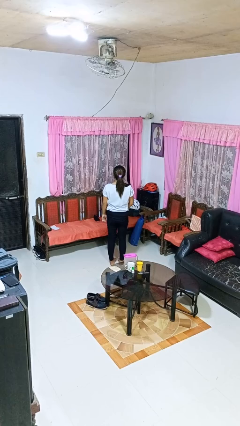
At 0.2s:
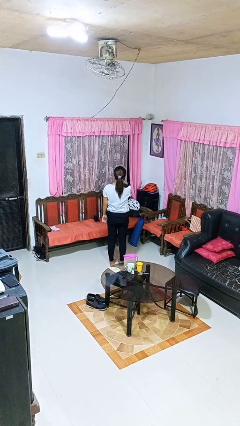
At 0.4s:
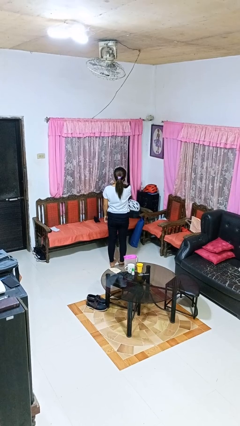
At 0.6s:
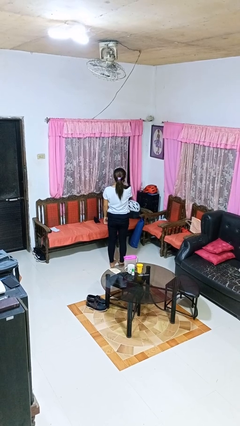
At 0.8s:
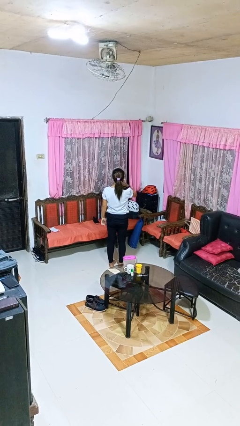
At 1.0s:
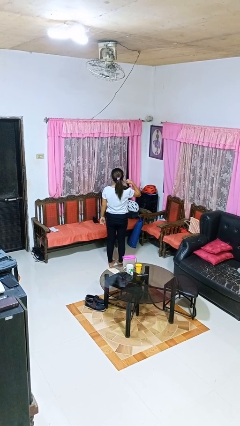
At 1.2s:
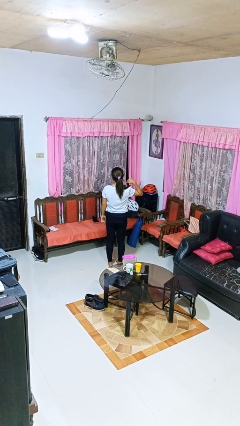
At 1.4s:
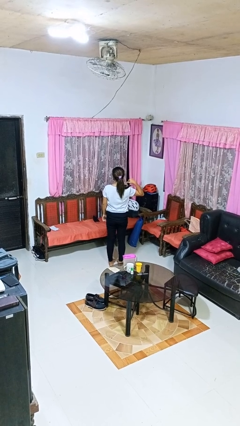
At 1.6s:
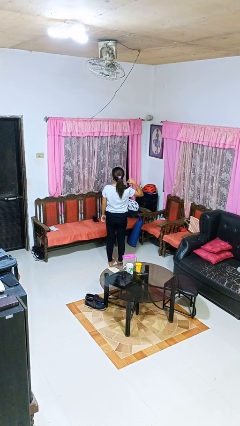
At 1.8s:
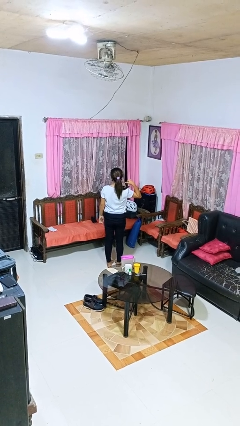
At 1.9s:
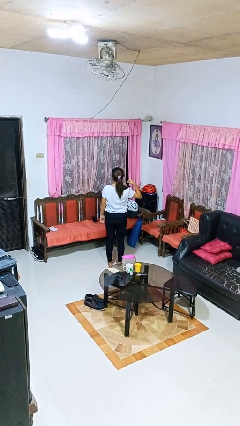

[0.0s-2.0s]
person gestures cut

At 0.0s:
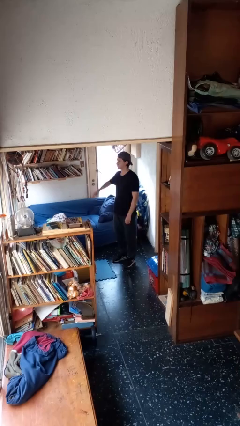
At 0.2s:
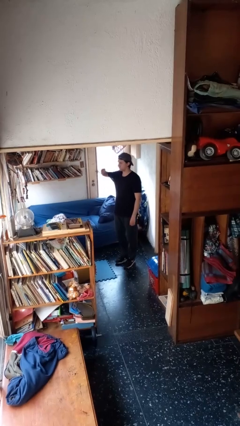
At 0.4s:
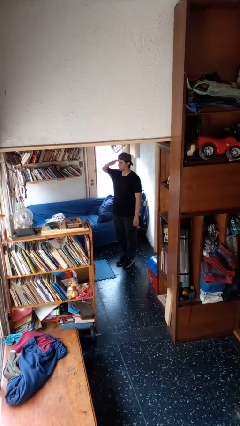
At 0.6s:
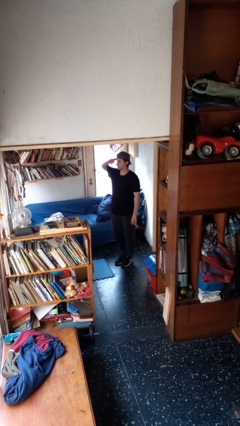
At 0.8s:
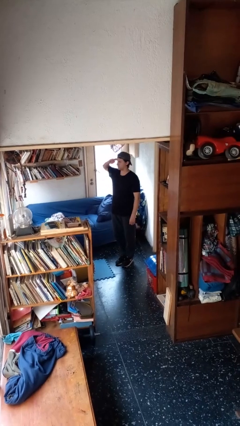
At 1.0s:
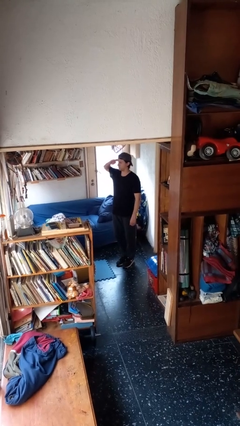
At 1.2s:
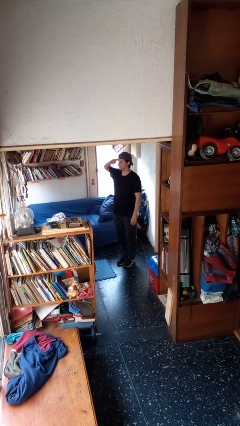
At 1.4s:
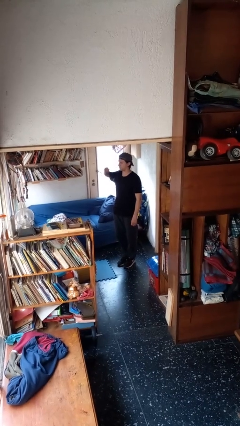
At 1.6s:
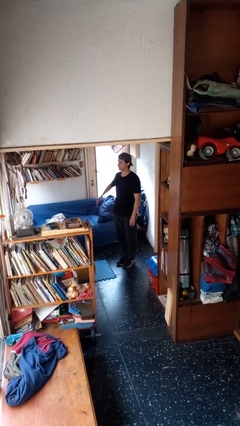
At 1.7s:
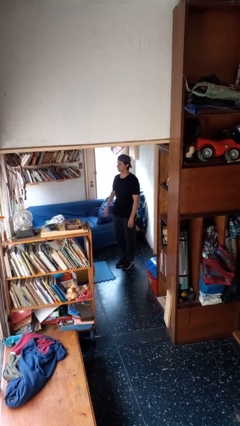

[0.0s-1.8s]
person salutes

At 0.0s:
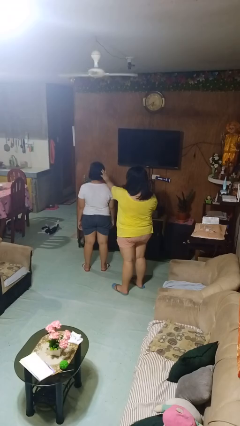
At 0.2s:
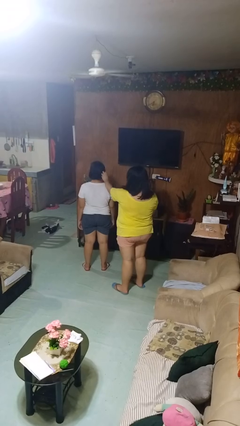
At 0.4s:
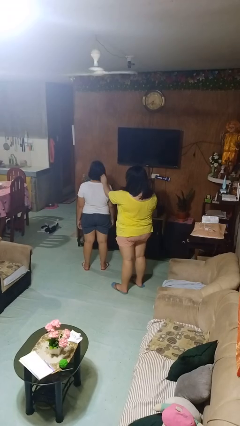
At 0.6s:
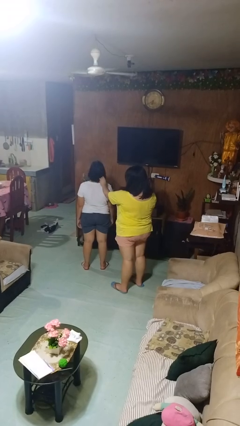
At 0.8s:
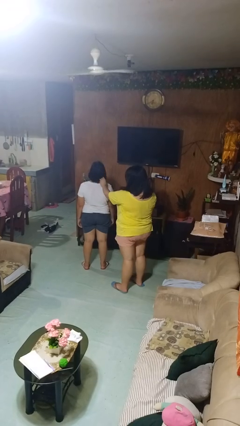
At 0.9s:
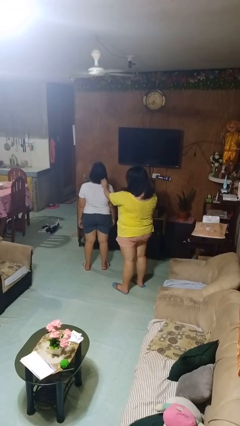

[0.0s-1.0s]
person grabs person by hair

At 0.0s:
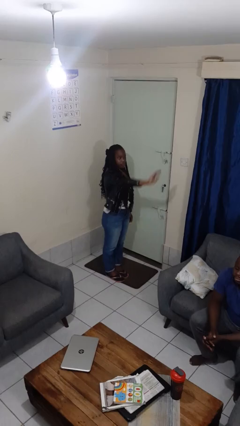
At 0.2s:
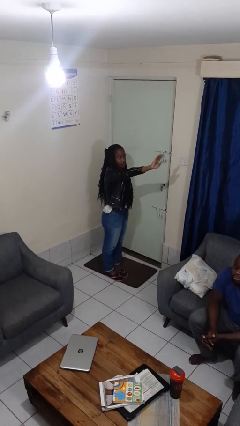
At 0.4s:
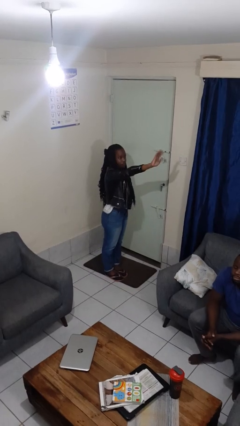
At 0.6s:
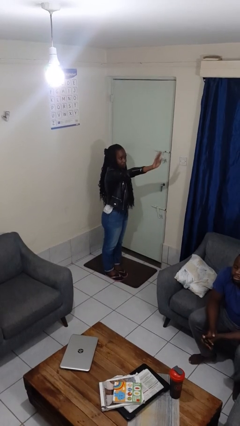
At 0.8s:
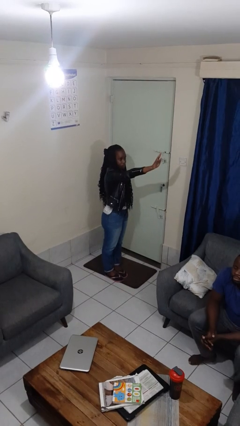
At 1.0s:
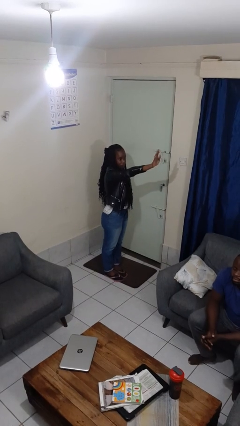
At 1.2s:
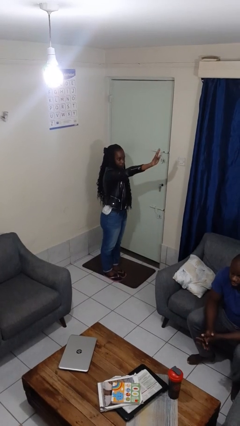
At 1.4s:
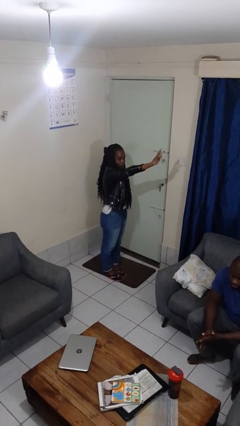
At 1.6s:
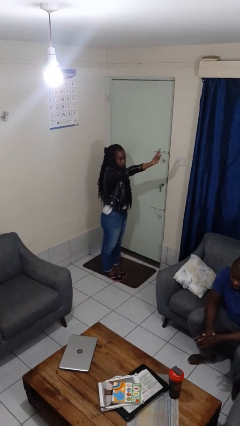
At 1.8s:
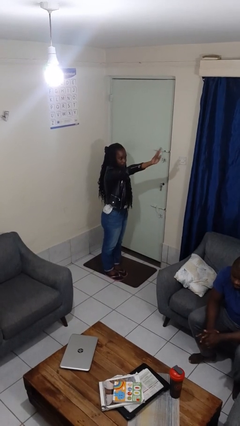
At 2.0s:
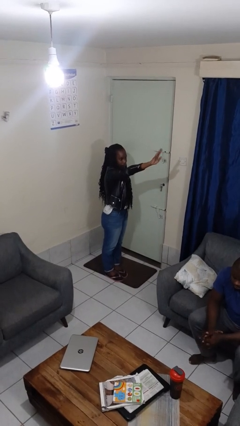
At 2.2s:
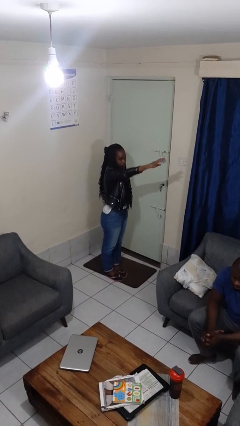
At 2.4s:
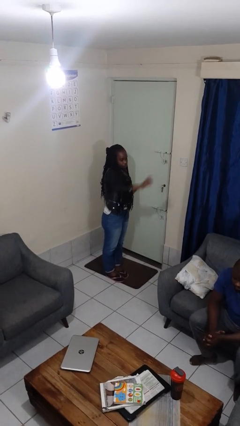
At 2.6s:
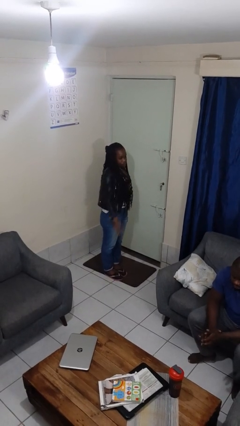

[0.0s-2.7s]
person waves at person

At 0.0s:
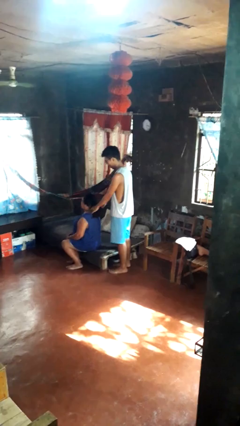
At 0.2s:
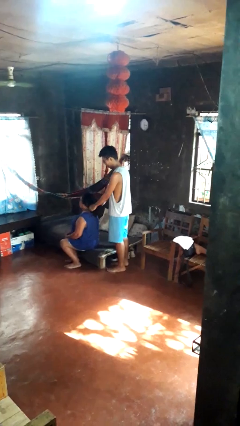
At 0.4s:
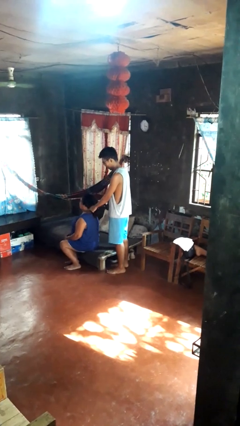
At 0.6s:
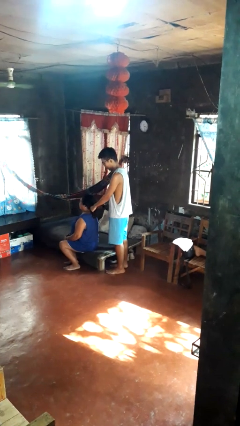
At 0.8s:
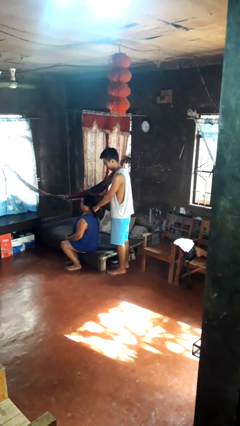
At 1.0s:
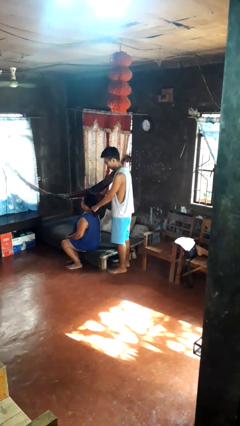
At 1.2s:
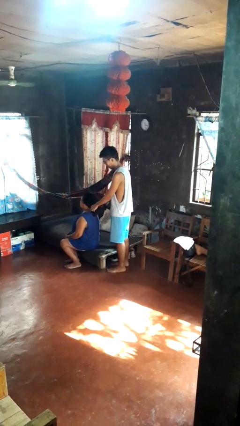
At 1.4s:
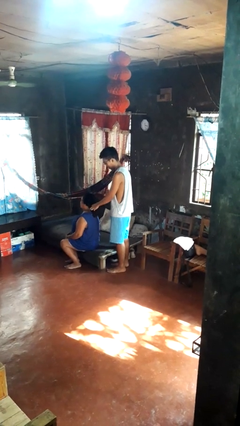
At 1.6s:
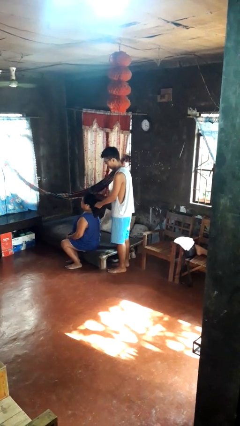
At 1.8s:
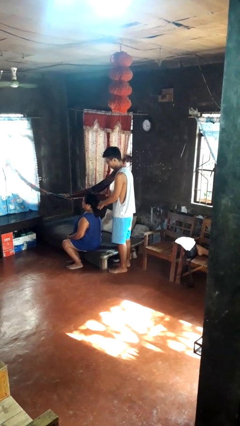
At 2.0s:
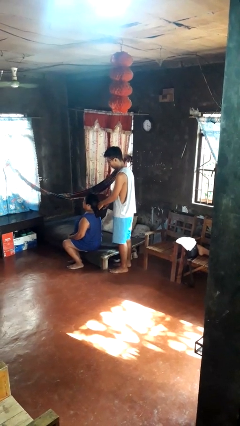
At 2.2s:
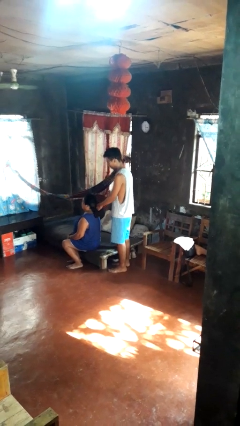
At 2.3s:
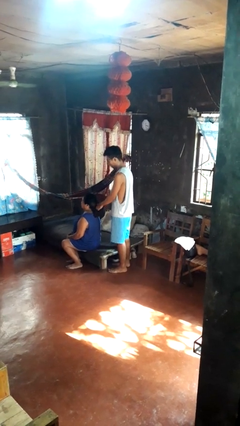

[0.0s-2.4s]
person braids hair of person

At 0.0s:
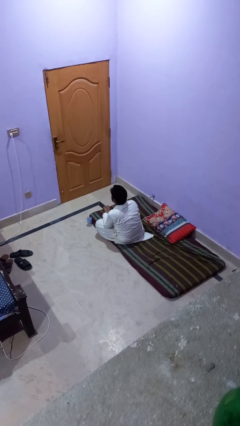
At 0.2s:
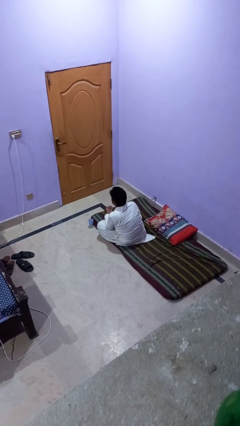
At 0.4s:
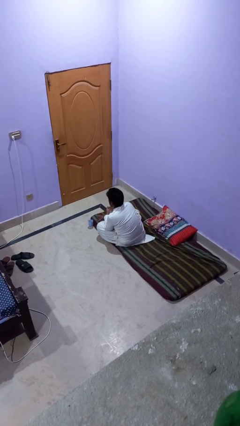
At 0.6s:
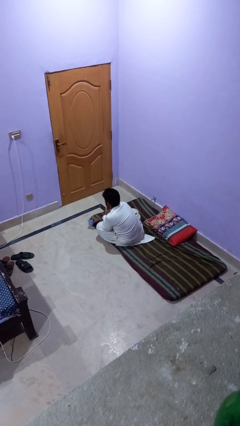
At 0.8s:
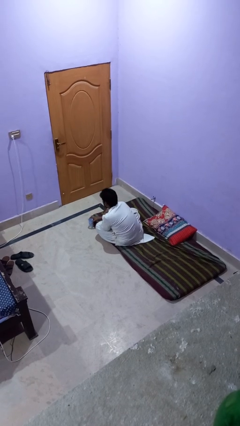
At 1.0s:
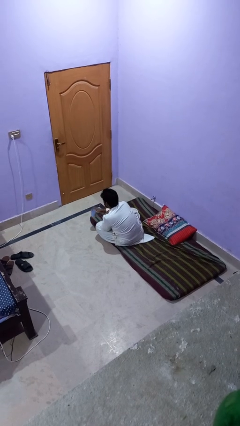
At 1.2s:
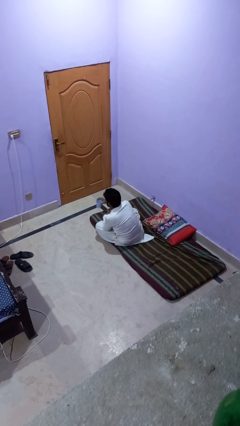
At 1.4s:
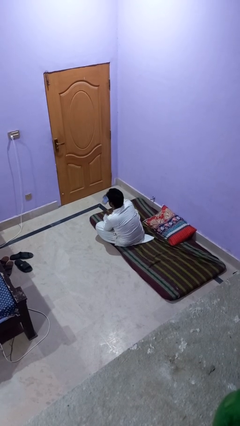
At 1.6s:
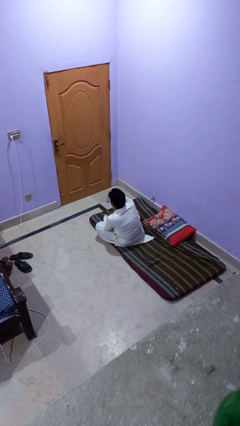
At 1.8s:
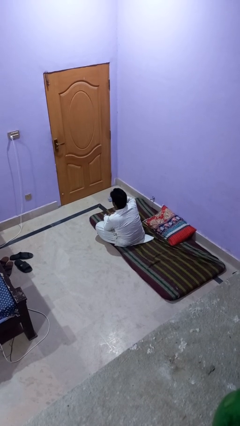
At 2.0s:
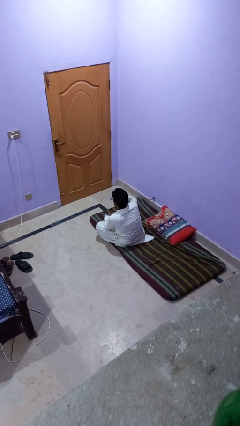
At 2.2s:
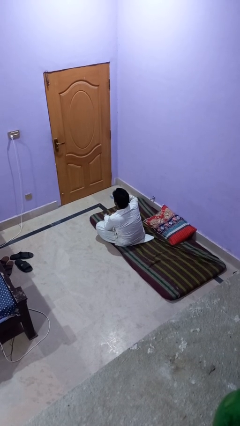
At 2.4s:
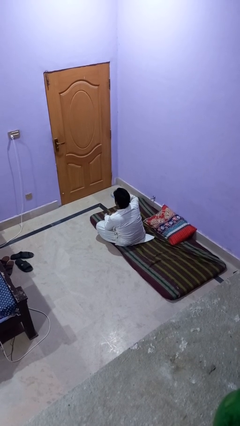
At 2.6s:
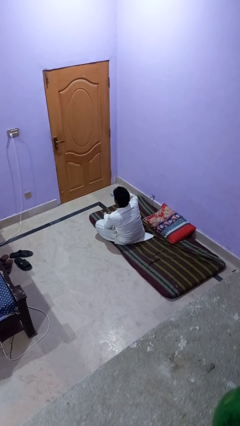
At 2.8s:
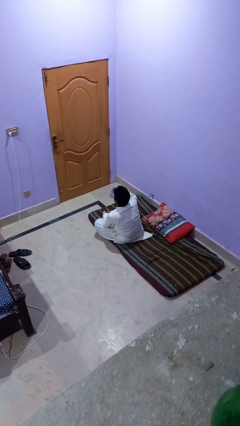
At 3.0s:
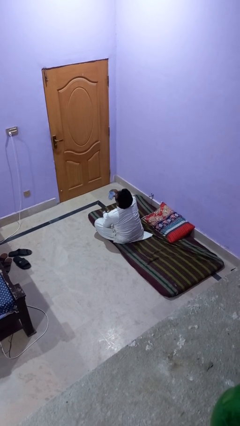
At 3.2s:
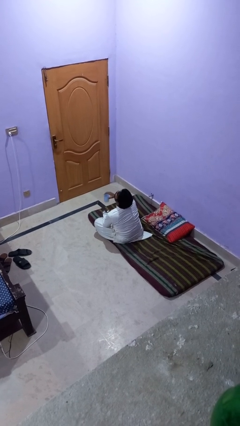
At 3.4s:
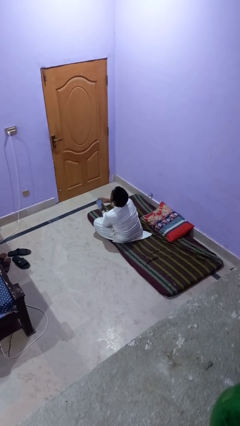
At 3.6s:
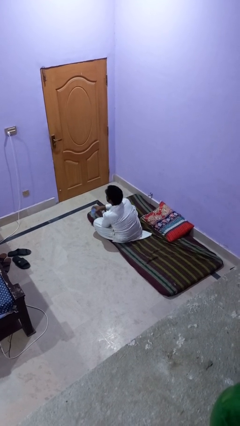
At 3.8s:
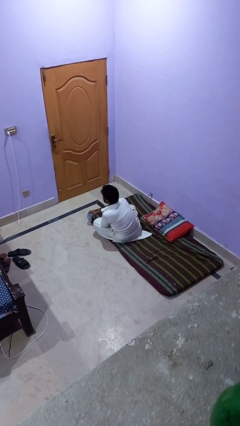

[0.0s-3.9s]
person drinks from cup

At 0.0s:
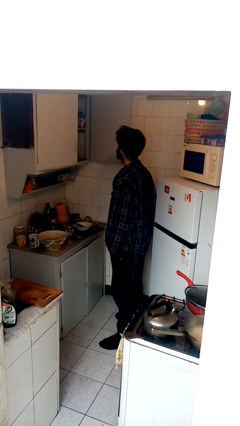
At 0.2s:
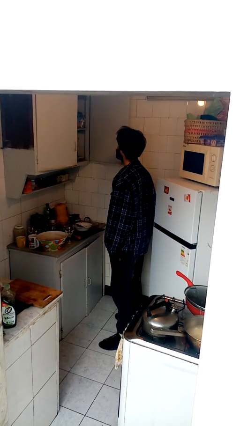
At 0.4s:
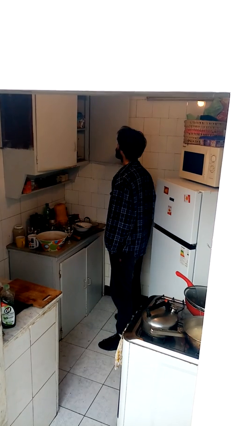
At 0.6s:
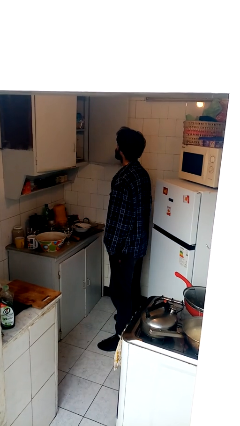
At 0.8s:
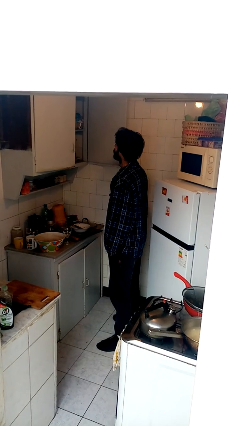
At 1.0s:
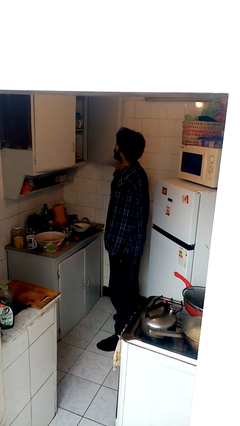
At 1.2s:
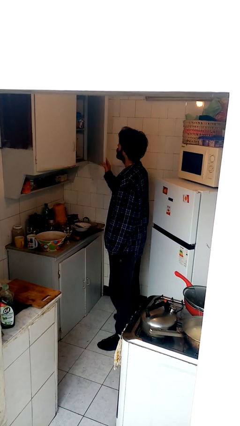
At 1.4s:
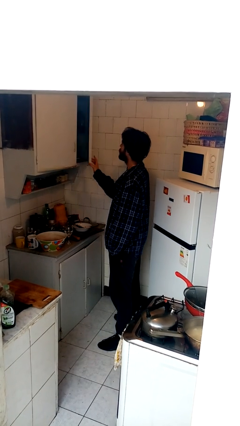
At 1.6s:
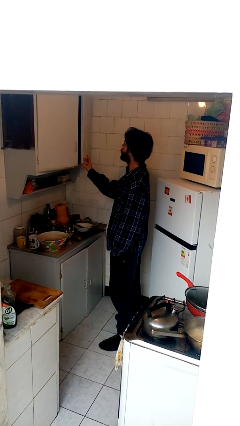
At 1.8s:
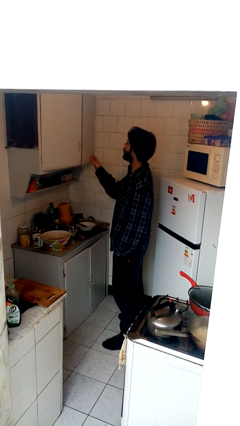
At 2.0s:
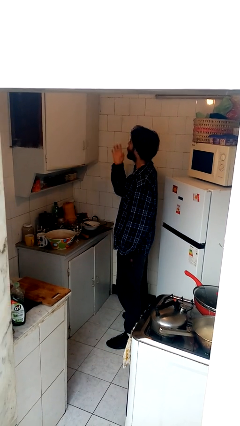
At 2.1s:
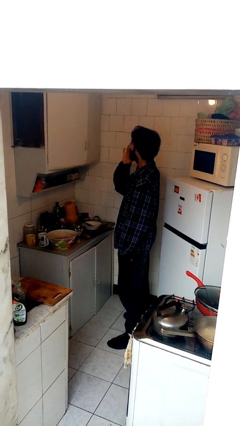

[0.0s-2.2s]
person closes cabinet

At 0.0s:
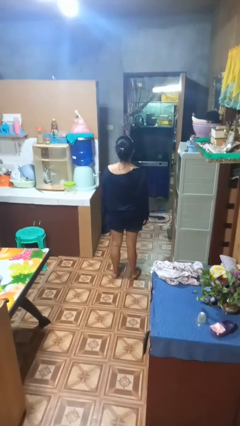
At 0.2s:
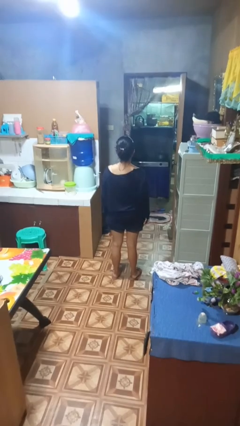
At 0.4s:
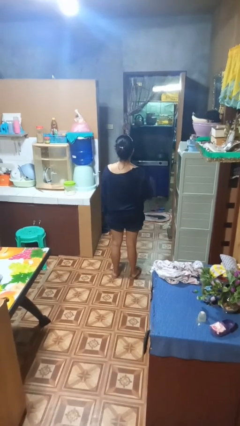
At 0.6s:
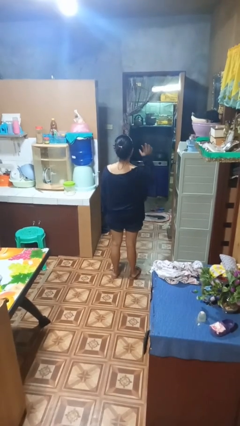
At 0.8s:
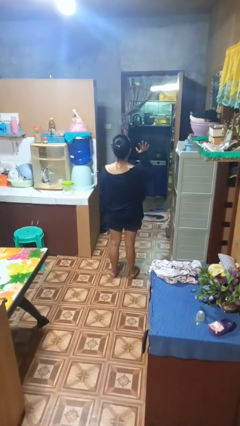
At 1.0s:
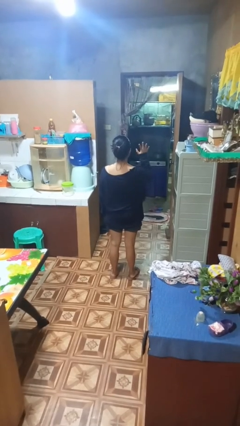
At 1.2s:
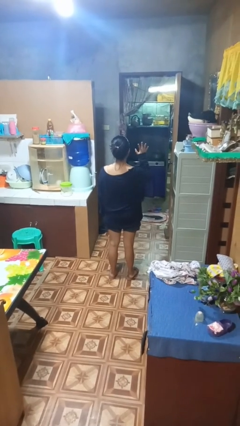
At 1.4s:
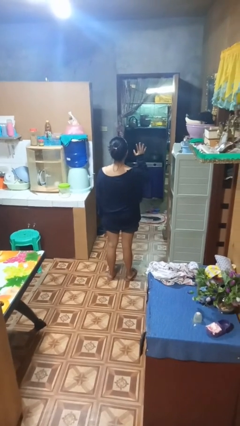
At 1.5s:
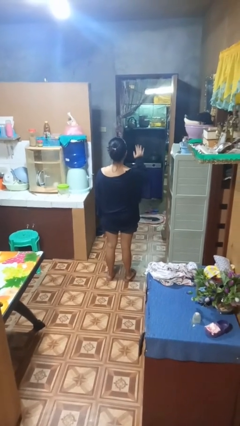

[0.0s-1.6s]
person gestures number five
